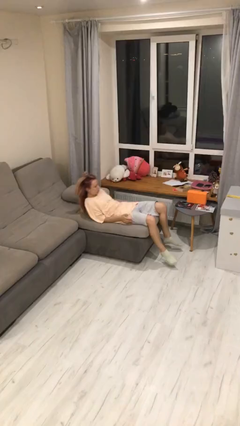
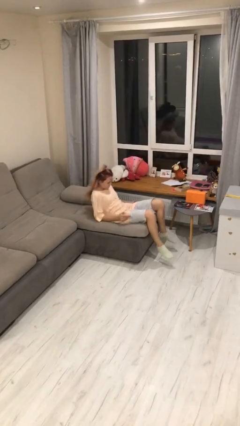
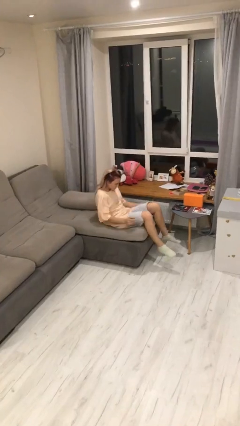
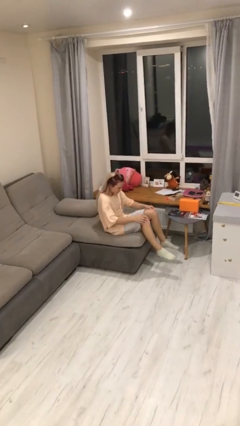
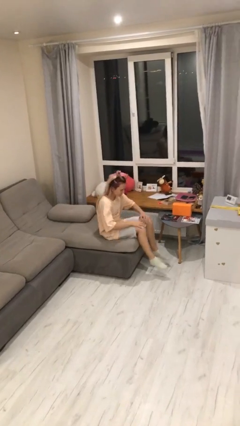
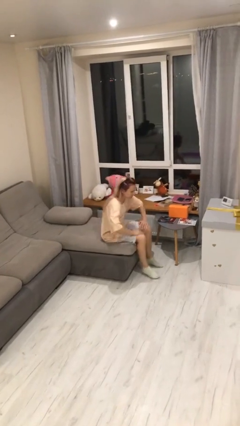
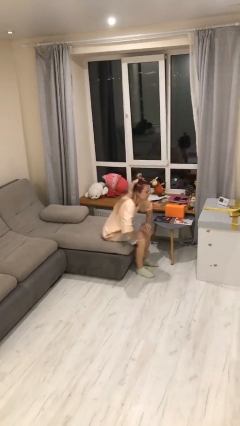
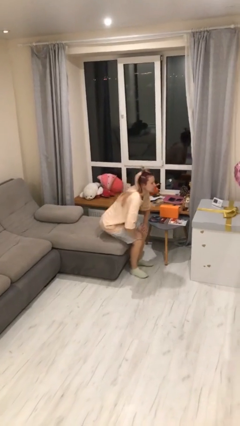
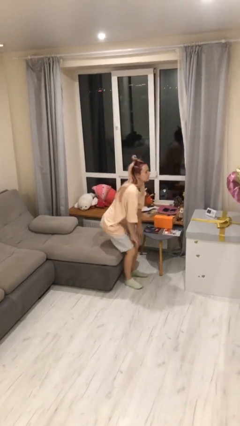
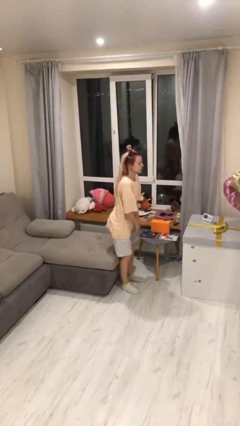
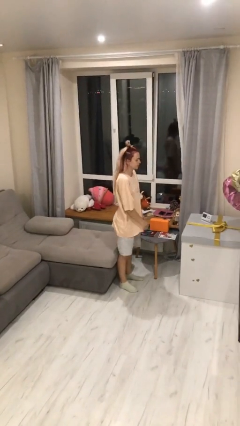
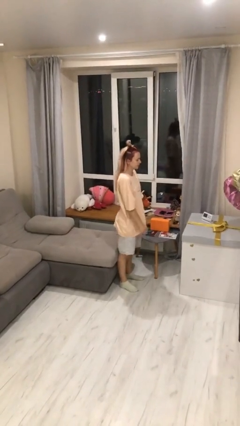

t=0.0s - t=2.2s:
person stands up

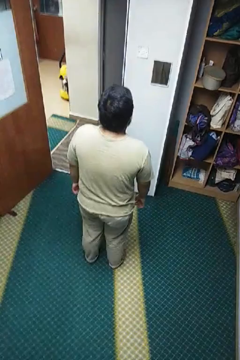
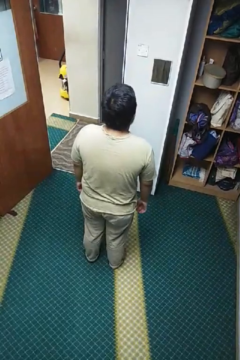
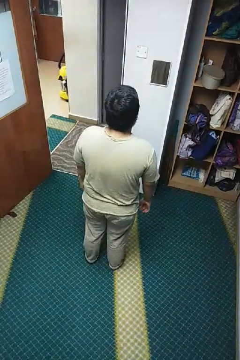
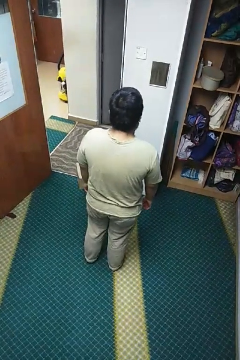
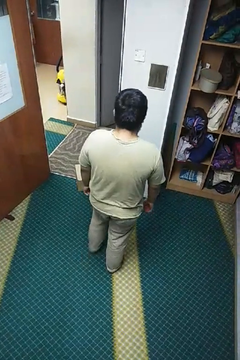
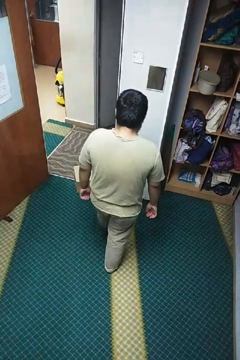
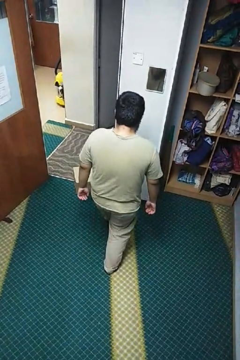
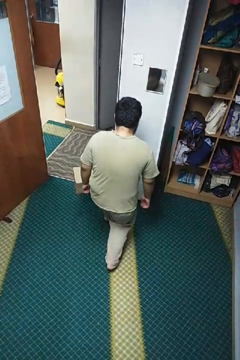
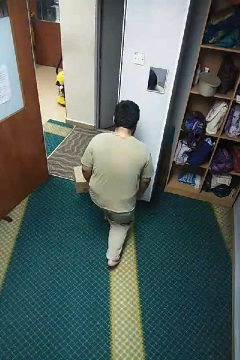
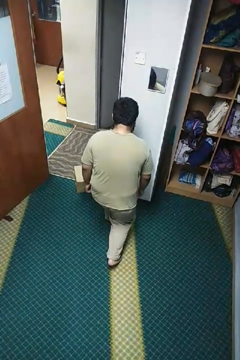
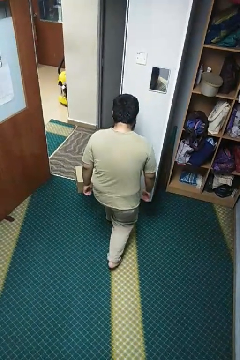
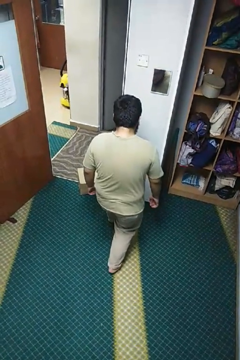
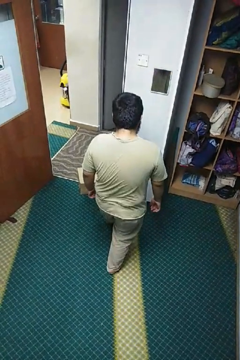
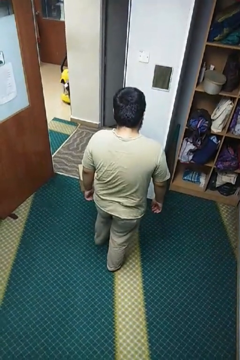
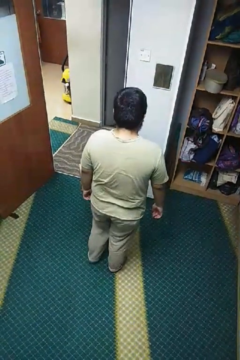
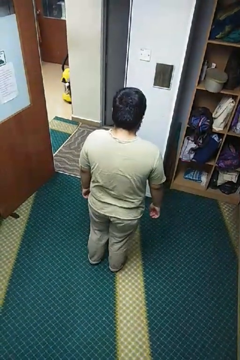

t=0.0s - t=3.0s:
person exercises with lunges

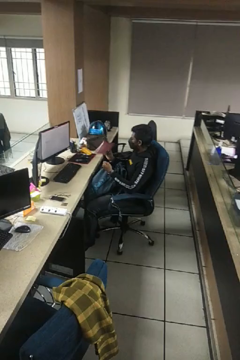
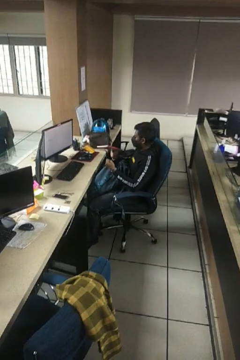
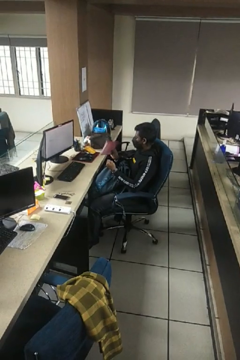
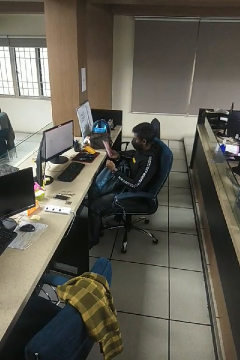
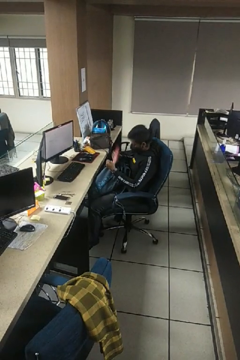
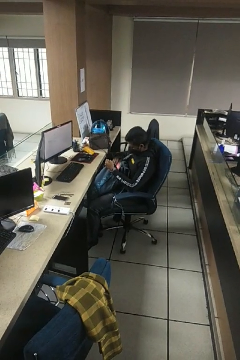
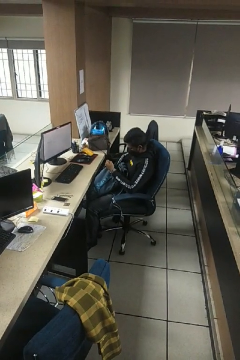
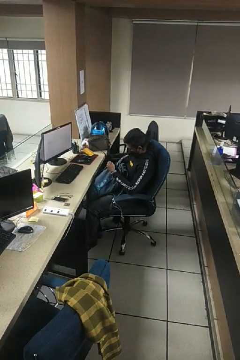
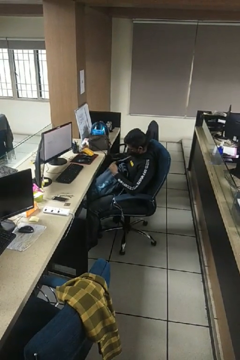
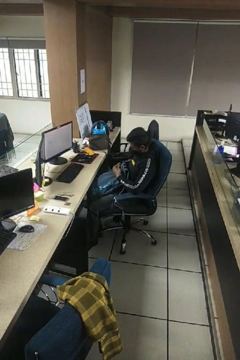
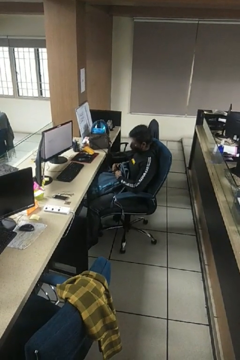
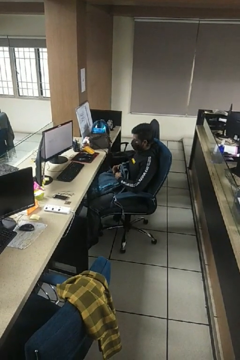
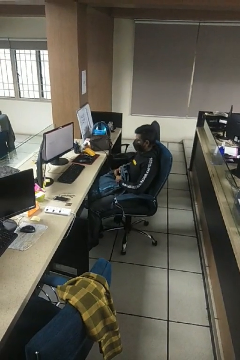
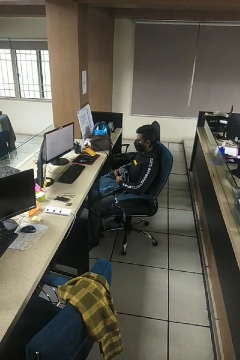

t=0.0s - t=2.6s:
person puts object into backpack

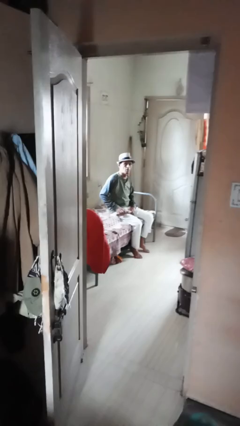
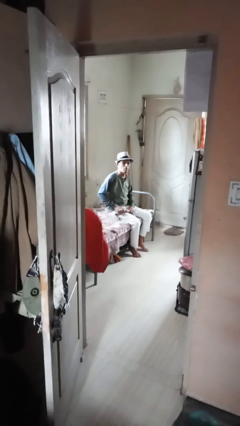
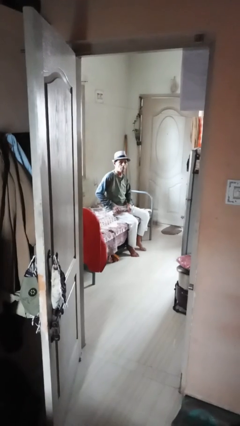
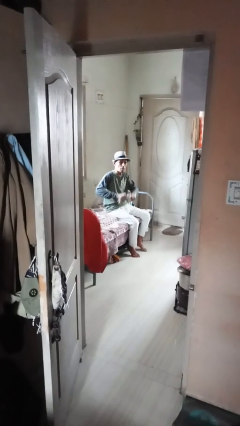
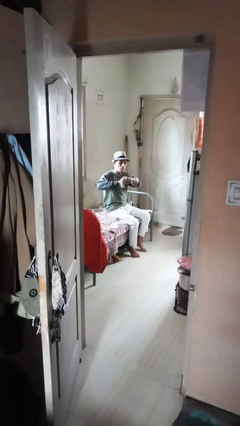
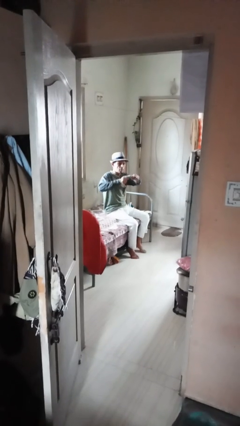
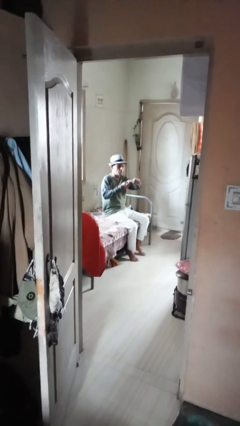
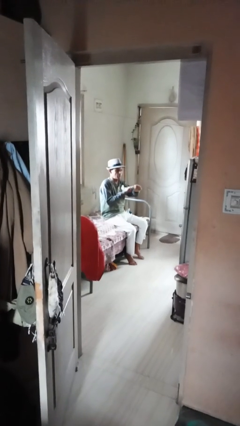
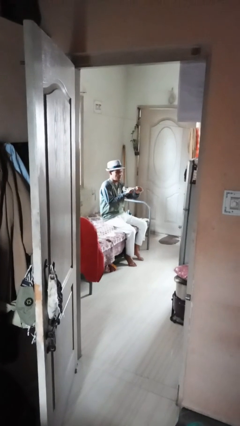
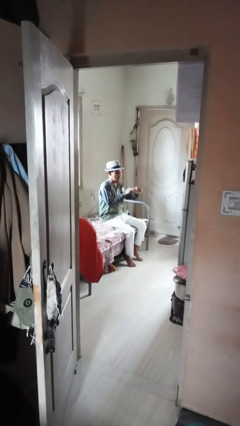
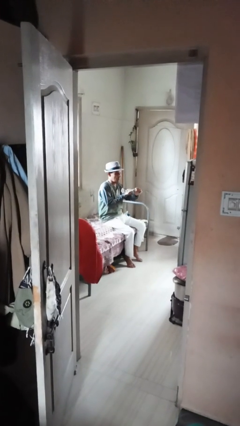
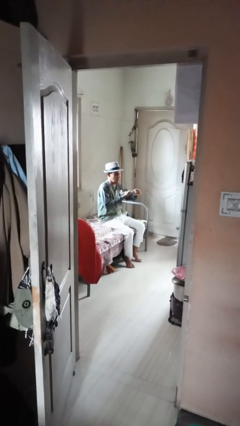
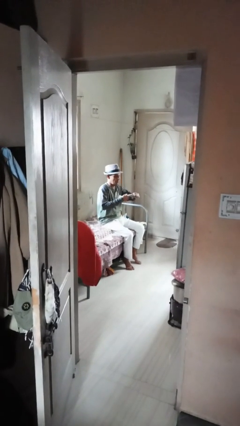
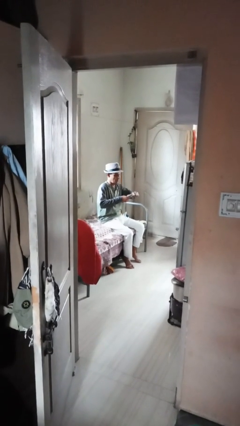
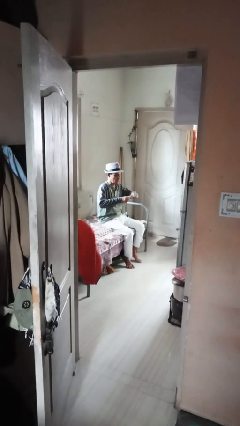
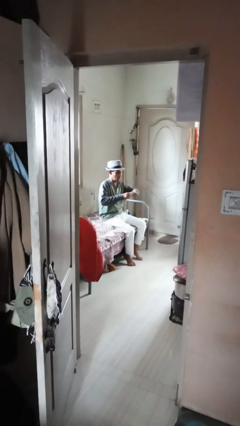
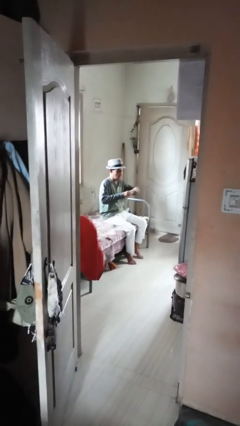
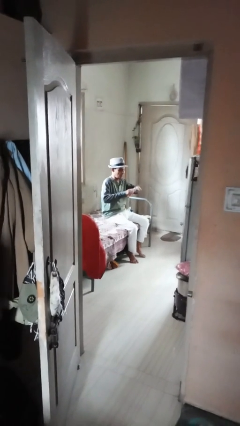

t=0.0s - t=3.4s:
person squeezes object

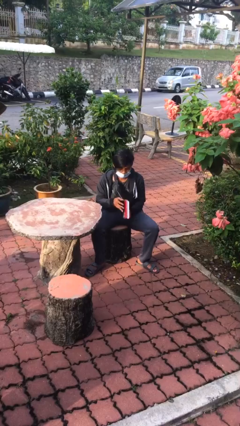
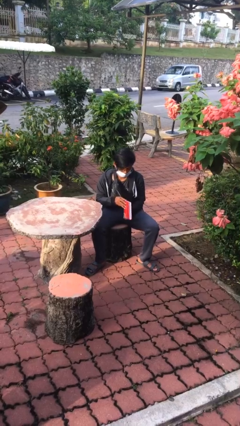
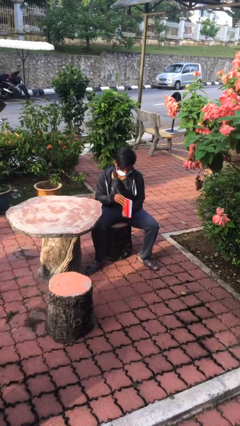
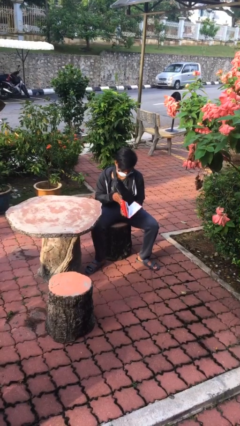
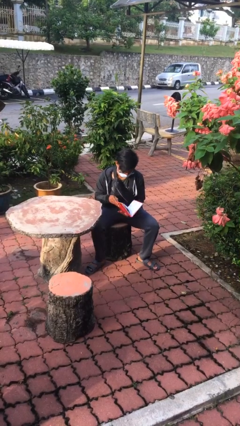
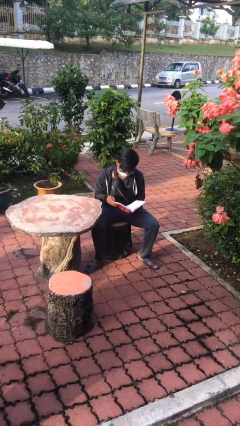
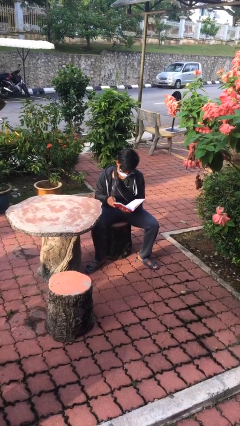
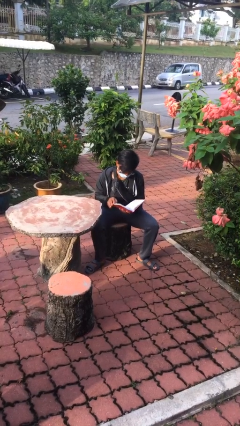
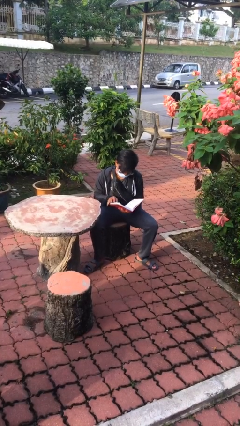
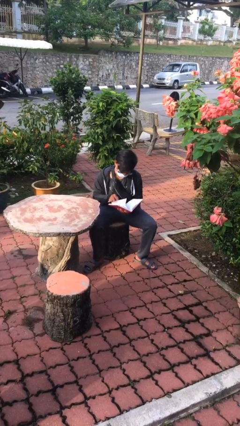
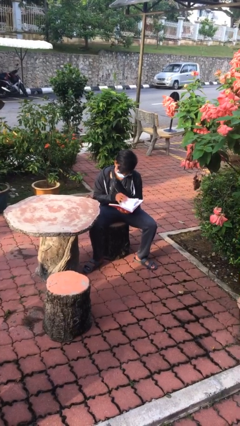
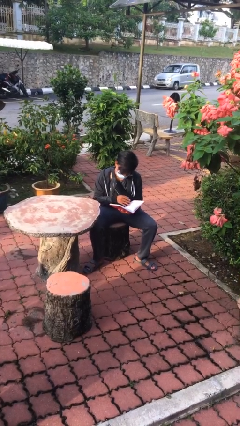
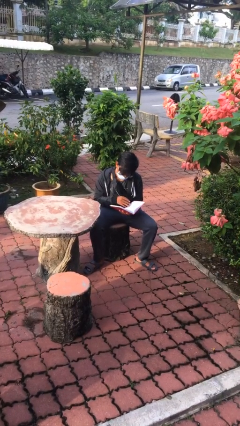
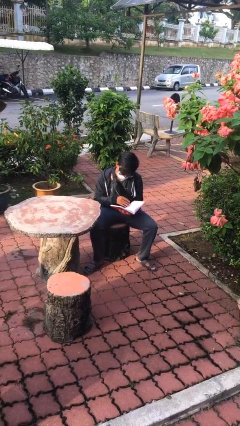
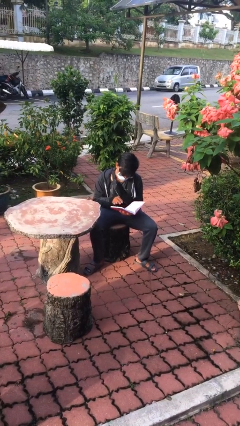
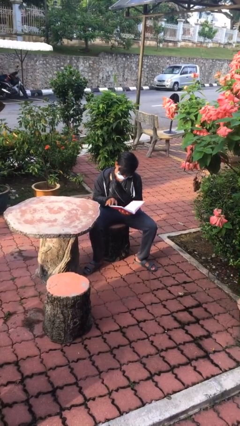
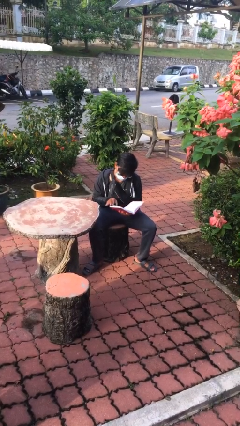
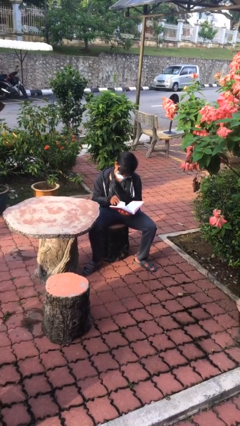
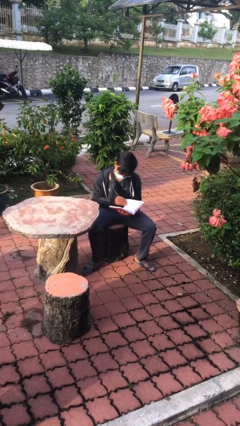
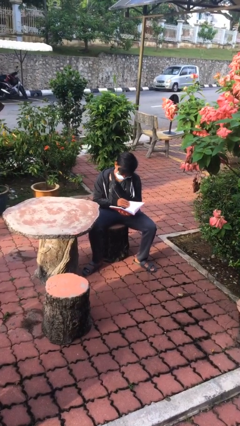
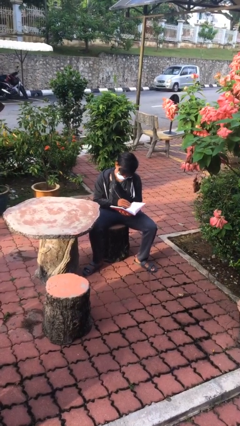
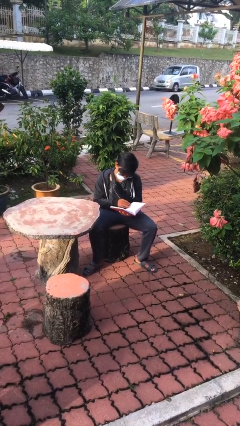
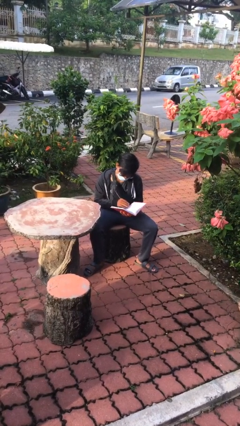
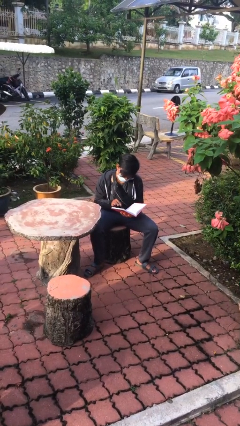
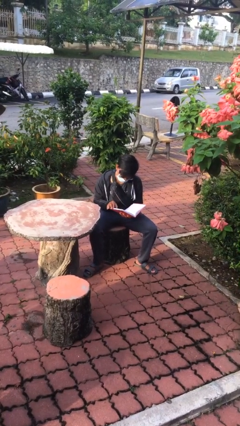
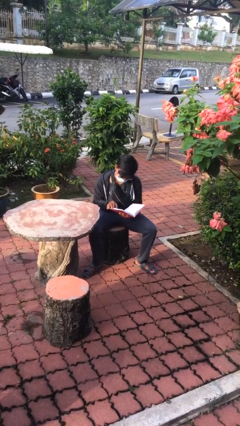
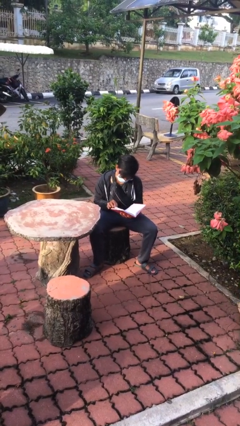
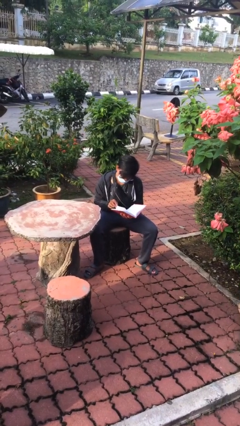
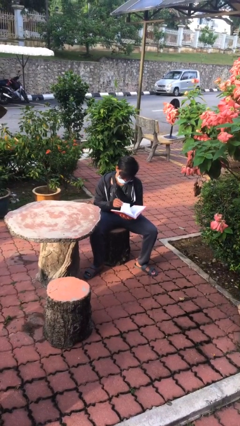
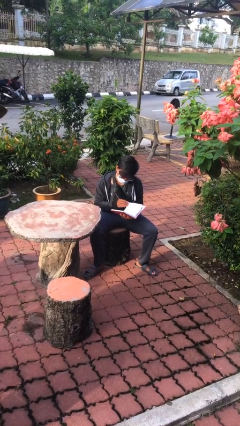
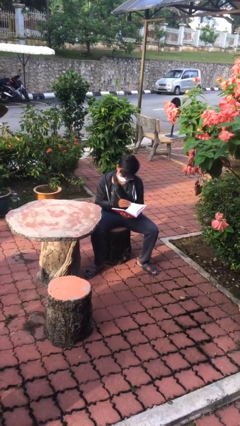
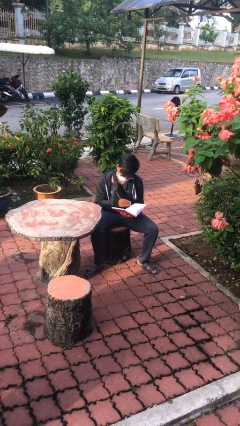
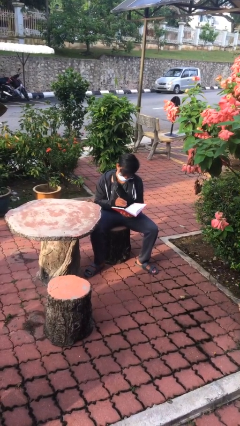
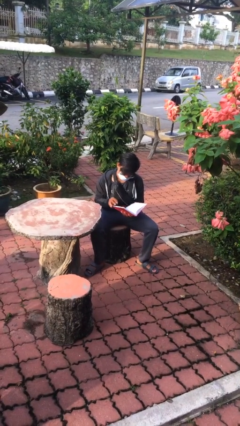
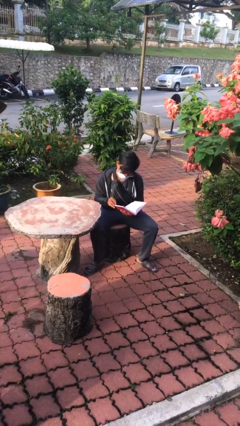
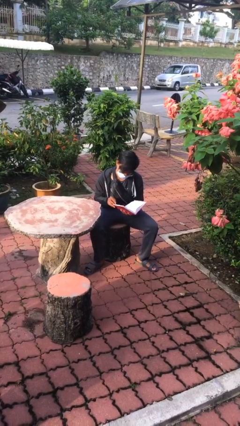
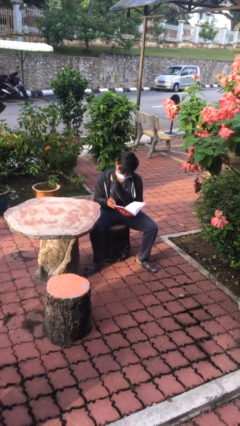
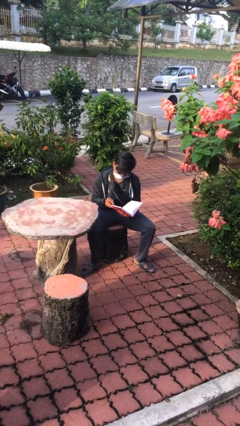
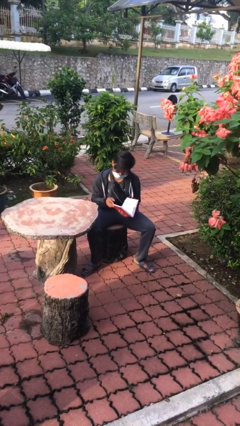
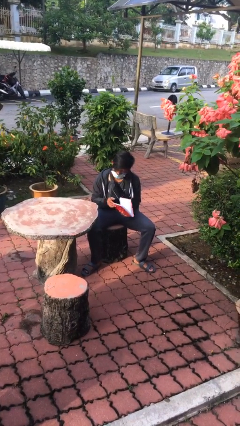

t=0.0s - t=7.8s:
person reads document
